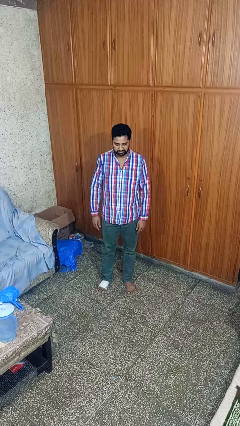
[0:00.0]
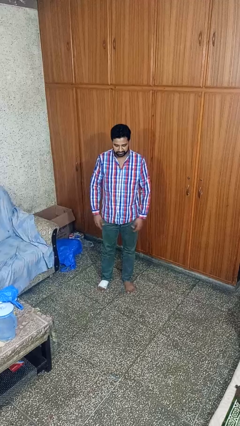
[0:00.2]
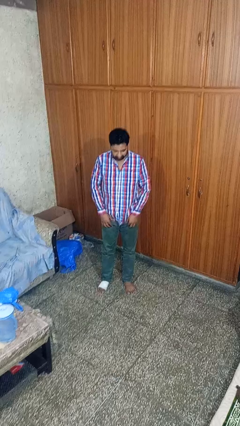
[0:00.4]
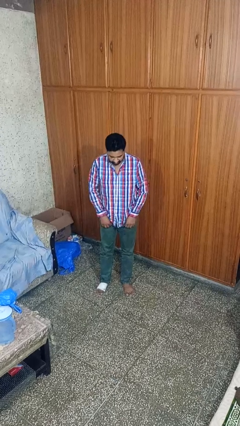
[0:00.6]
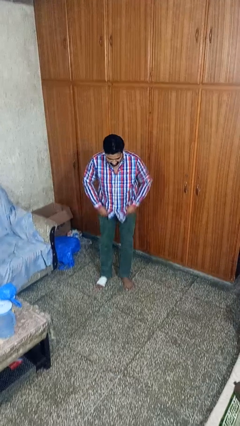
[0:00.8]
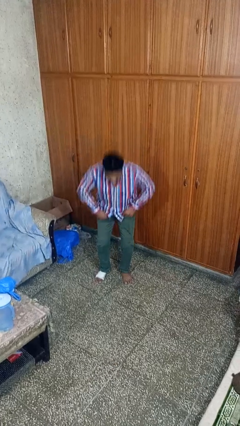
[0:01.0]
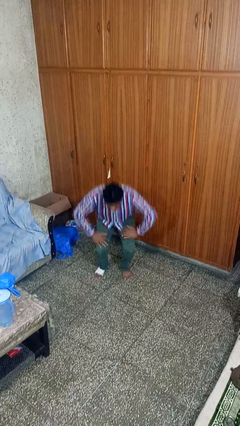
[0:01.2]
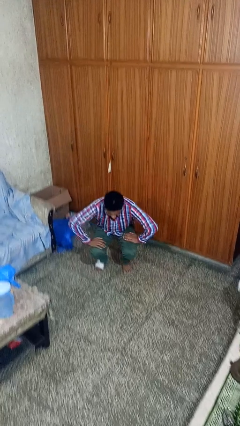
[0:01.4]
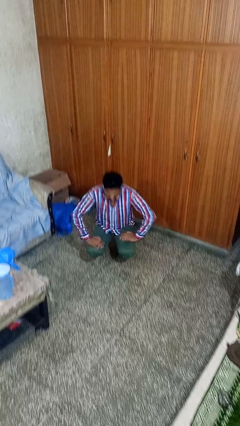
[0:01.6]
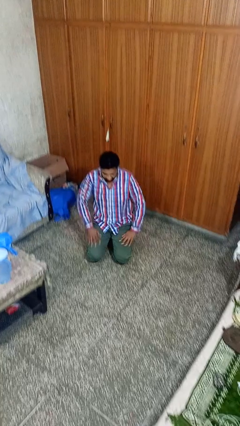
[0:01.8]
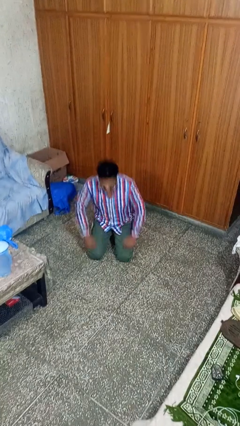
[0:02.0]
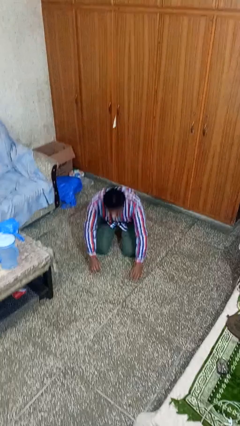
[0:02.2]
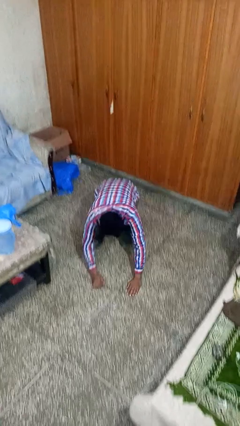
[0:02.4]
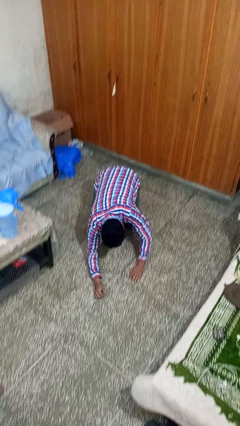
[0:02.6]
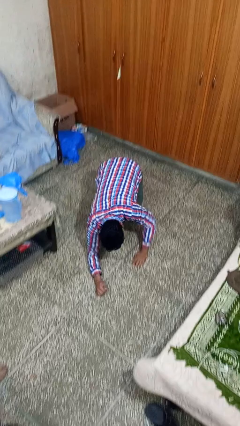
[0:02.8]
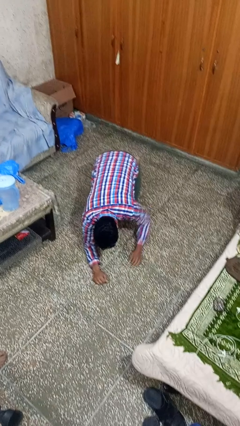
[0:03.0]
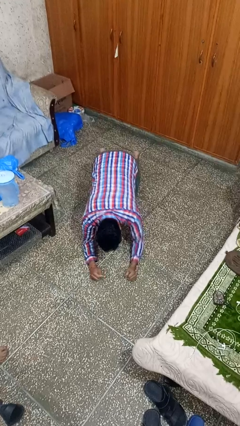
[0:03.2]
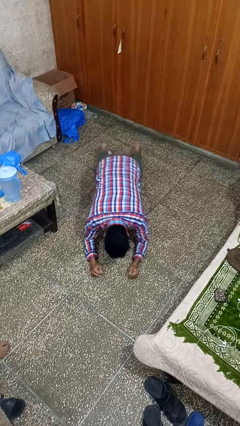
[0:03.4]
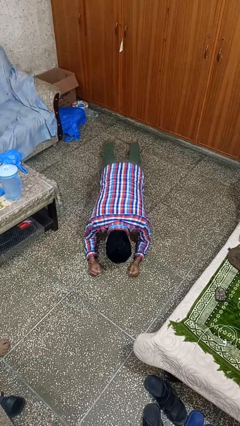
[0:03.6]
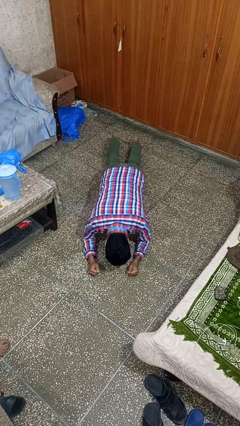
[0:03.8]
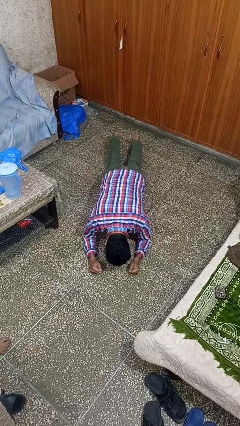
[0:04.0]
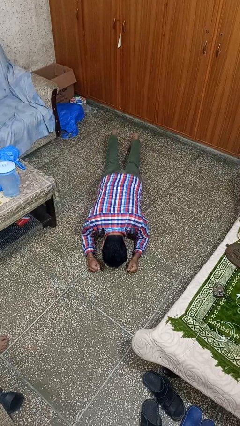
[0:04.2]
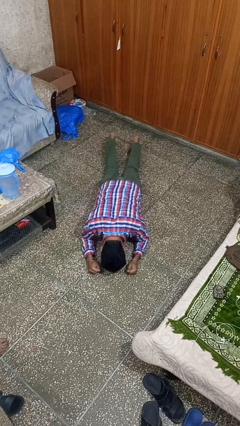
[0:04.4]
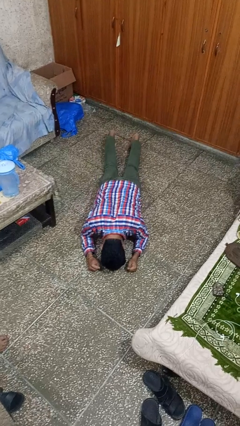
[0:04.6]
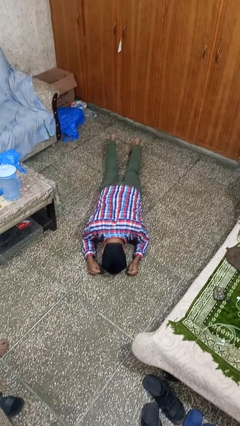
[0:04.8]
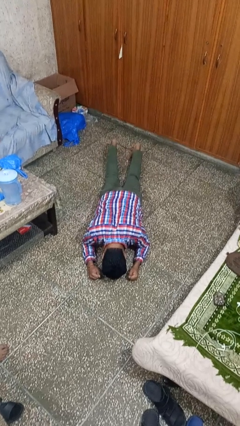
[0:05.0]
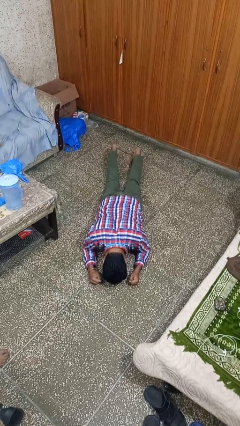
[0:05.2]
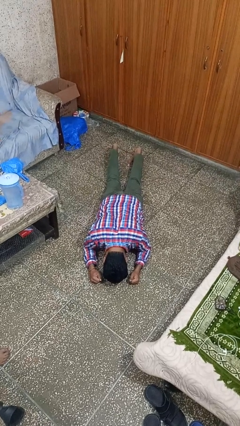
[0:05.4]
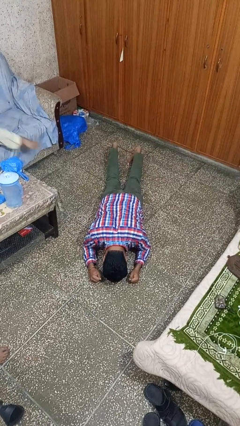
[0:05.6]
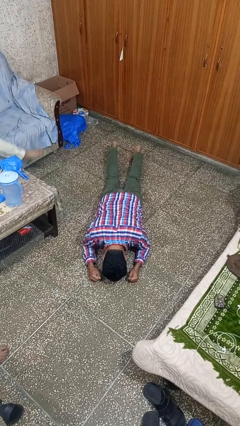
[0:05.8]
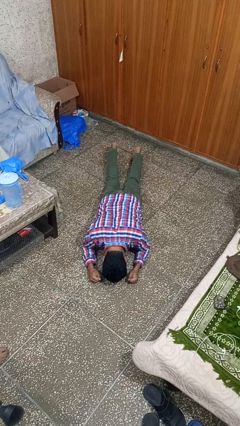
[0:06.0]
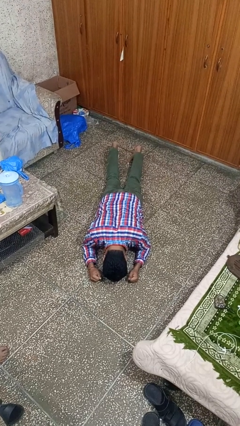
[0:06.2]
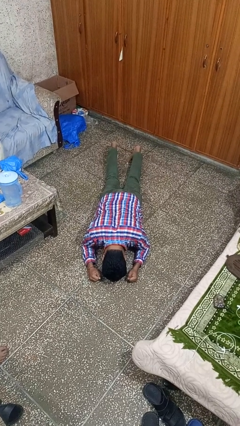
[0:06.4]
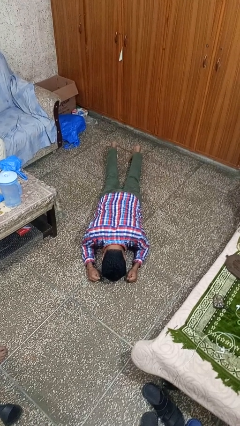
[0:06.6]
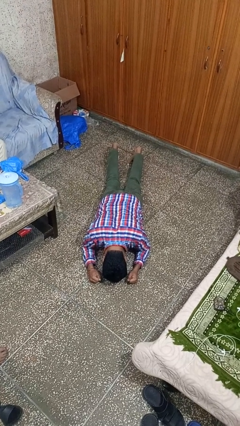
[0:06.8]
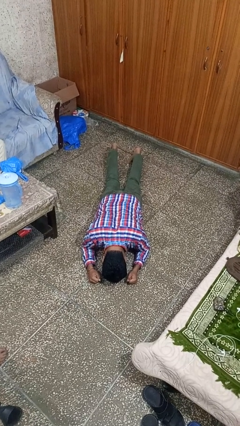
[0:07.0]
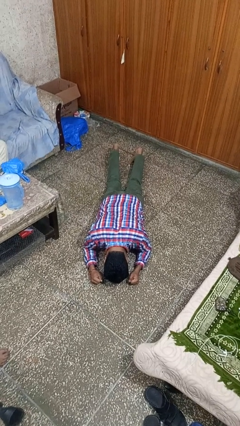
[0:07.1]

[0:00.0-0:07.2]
person exercises with plank

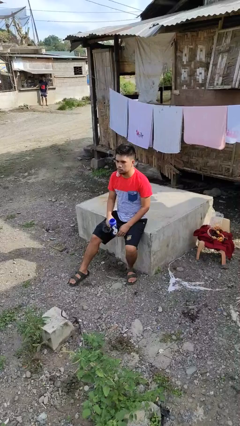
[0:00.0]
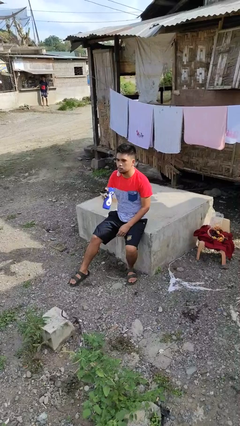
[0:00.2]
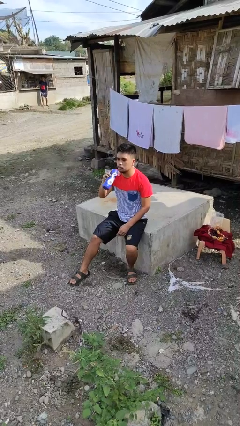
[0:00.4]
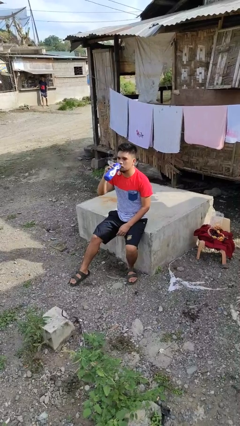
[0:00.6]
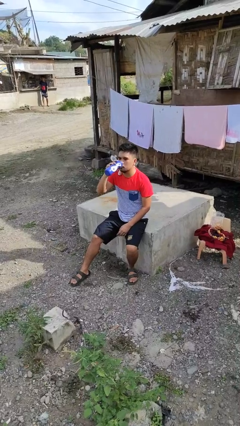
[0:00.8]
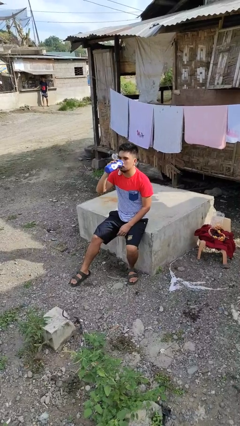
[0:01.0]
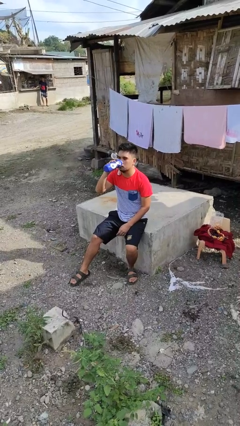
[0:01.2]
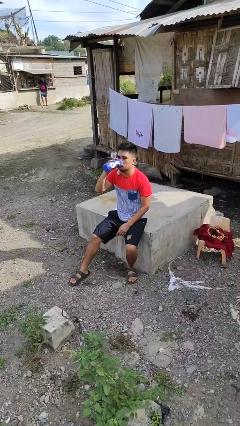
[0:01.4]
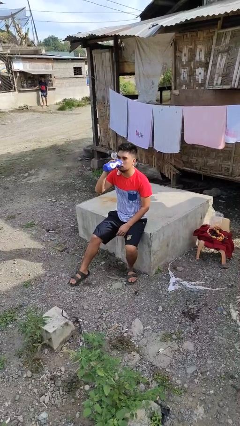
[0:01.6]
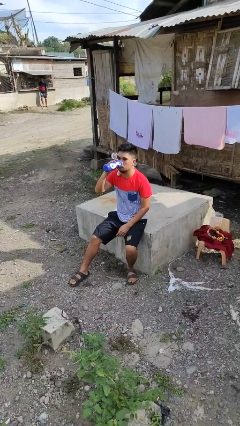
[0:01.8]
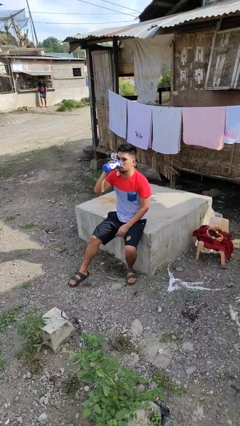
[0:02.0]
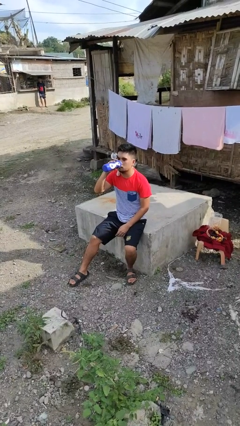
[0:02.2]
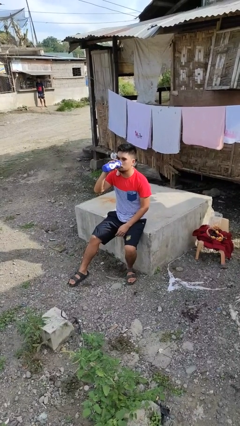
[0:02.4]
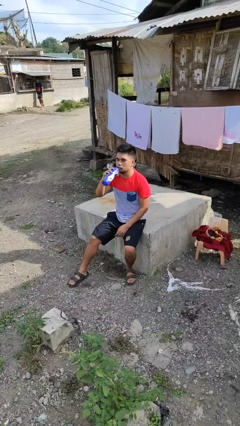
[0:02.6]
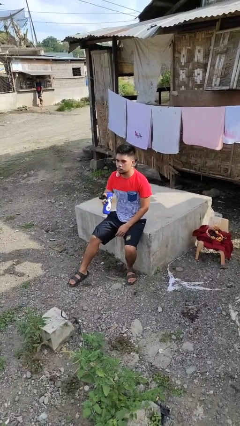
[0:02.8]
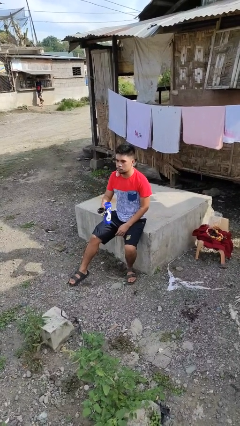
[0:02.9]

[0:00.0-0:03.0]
person drinks from bottle

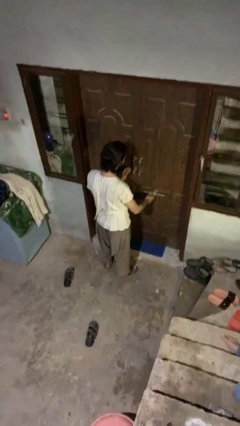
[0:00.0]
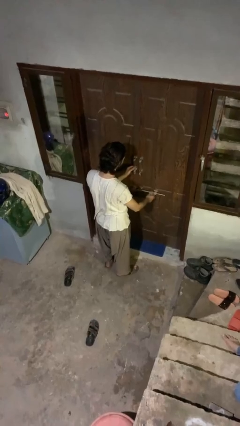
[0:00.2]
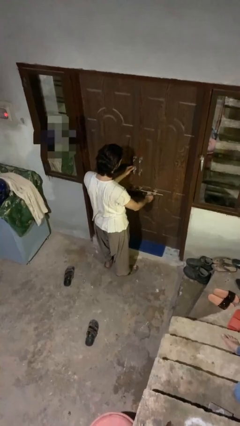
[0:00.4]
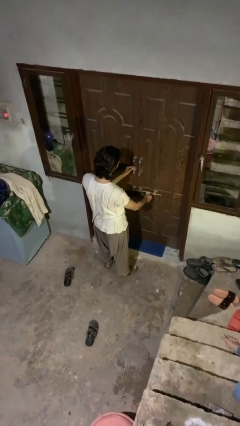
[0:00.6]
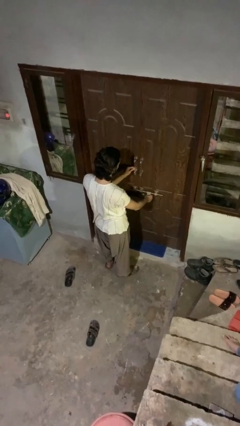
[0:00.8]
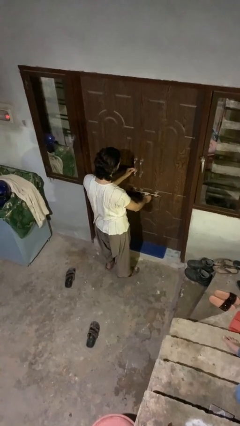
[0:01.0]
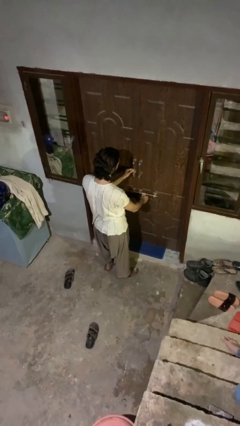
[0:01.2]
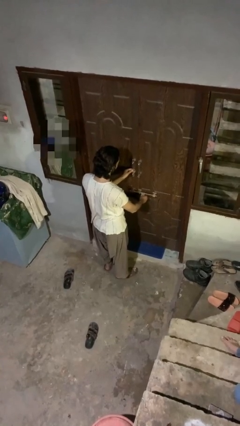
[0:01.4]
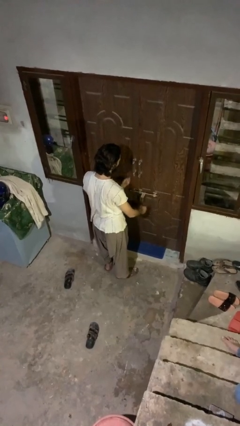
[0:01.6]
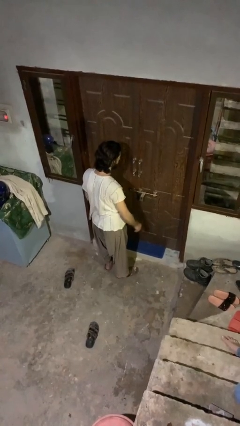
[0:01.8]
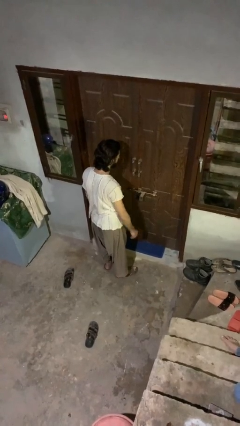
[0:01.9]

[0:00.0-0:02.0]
person locks door with keys

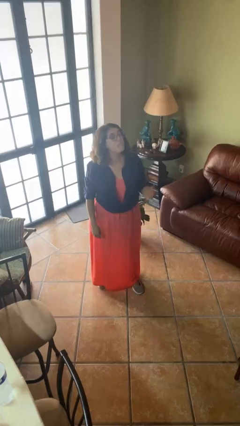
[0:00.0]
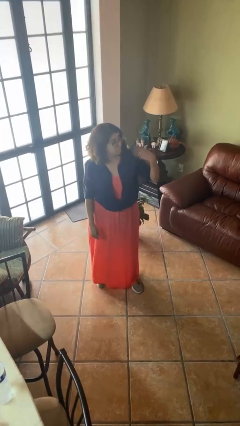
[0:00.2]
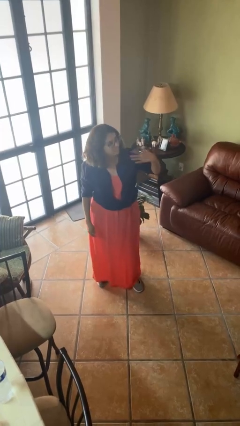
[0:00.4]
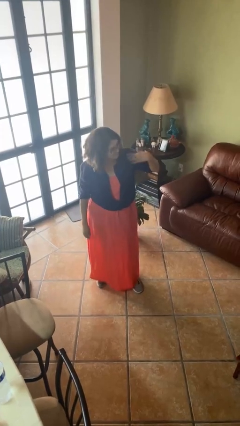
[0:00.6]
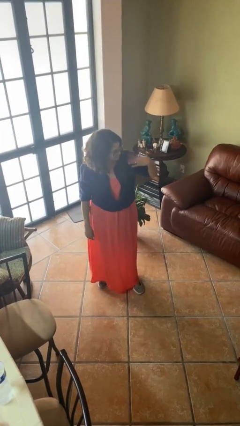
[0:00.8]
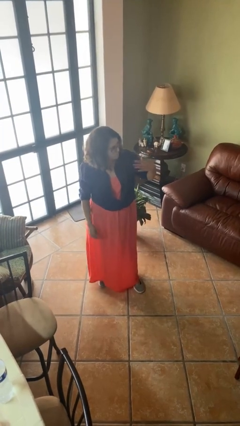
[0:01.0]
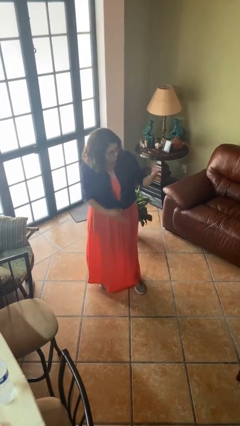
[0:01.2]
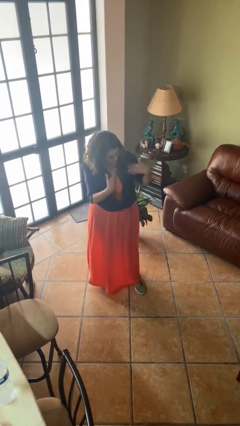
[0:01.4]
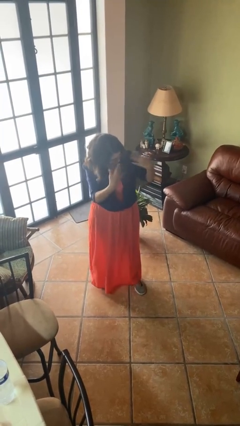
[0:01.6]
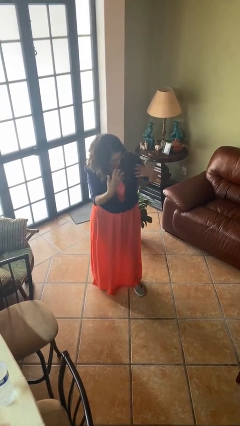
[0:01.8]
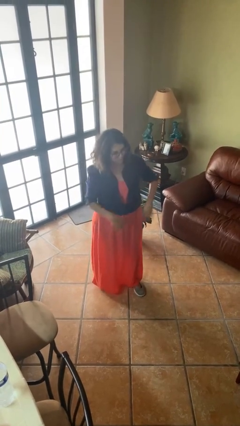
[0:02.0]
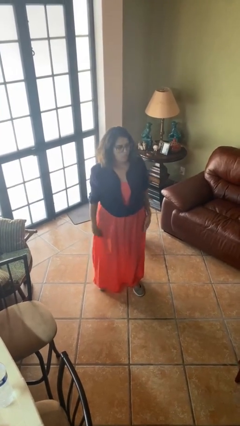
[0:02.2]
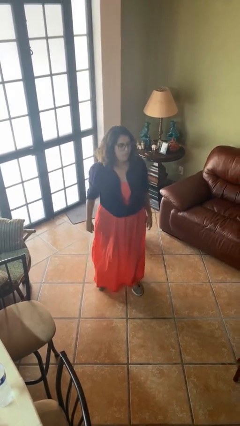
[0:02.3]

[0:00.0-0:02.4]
person gestures come here

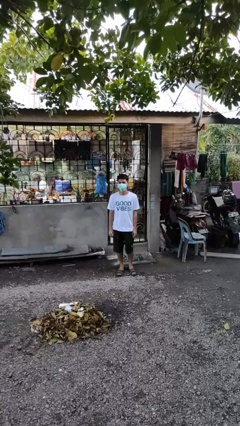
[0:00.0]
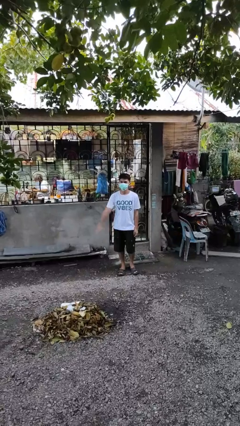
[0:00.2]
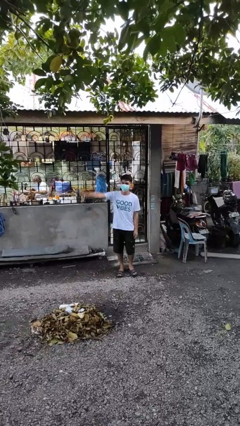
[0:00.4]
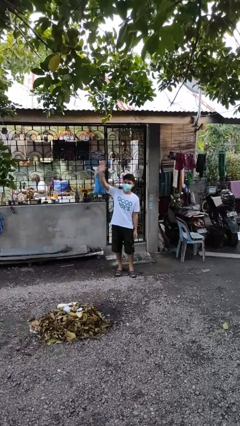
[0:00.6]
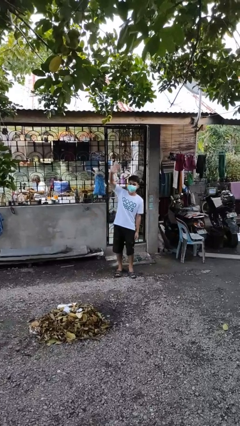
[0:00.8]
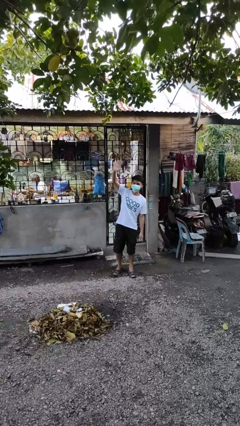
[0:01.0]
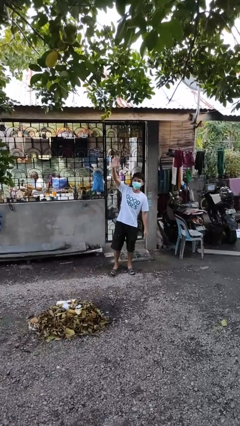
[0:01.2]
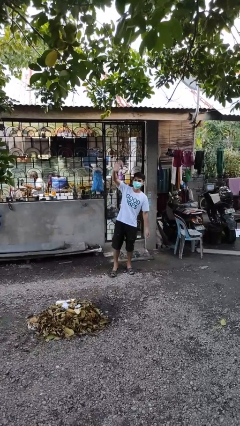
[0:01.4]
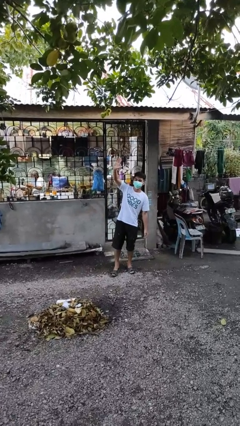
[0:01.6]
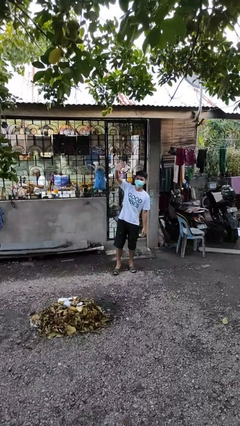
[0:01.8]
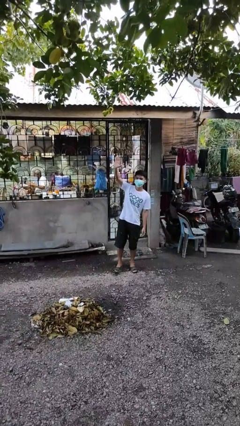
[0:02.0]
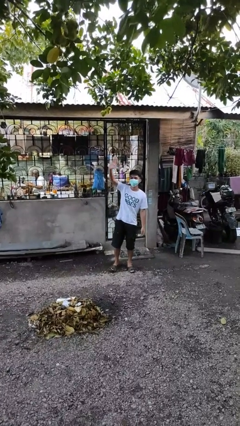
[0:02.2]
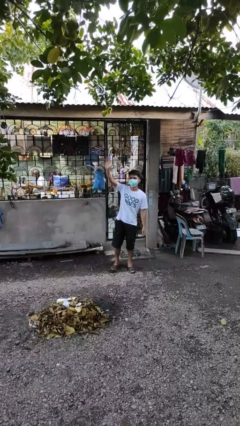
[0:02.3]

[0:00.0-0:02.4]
person waves at person

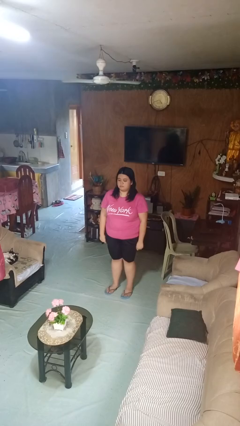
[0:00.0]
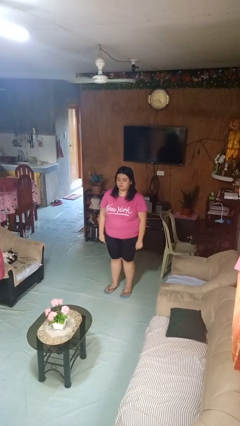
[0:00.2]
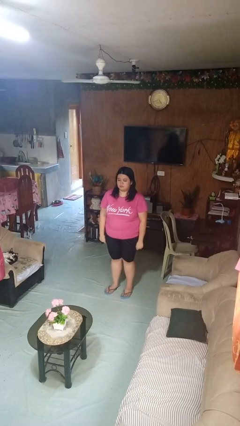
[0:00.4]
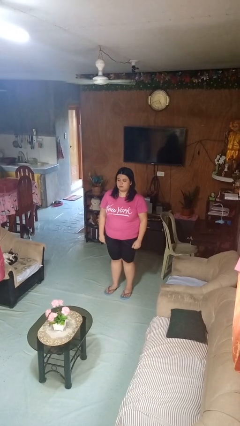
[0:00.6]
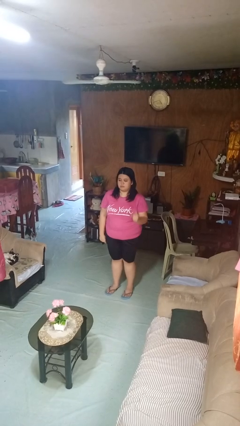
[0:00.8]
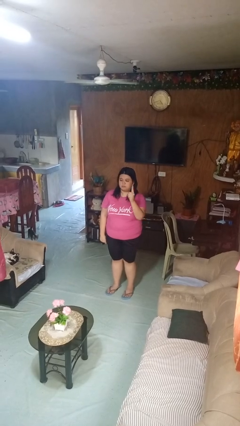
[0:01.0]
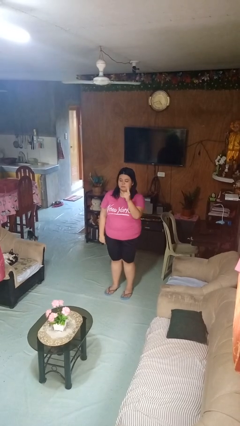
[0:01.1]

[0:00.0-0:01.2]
person gestures number one
